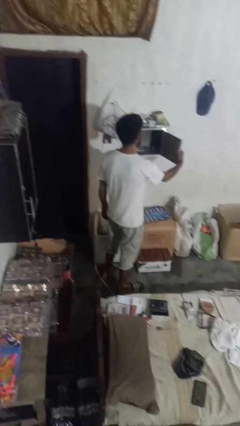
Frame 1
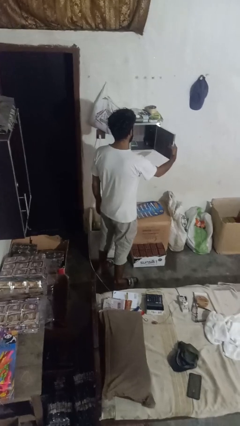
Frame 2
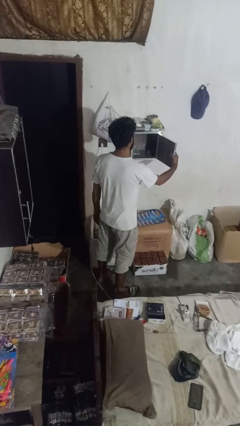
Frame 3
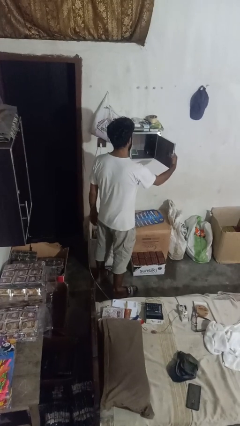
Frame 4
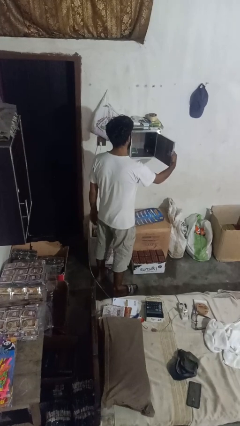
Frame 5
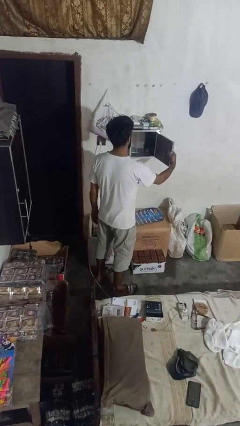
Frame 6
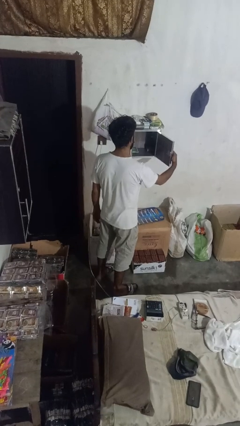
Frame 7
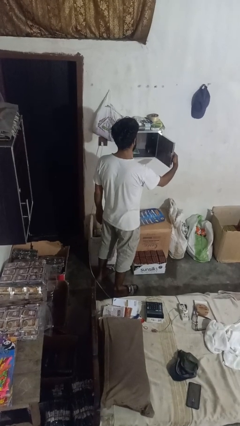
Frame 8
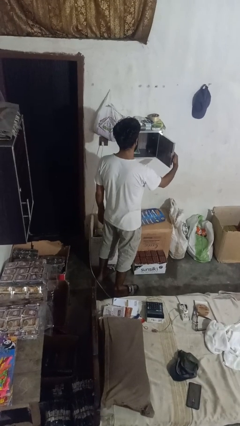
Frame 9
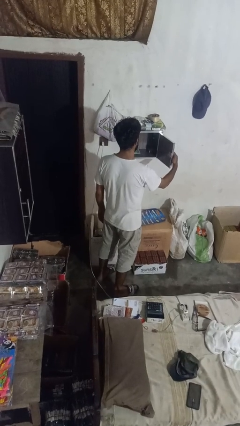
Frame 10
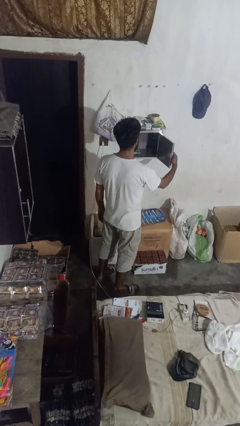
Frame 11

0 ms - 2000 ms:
person picks up object from cabinet

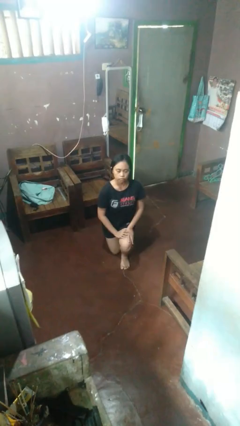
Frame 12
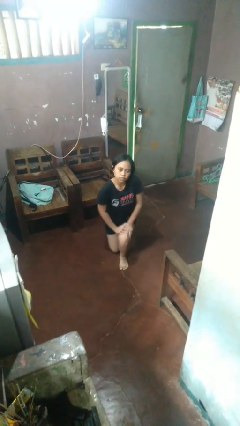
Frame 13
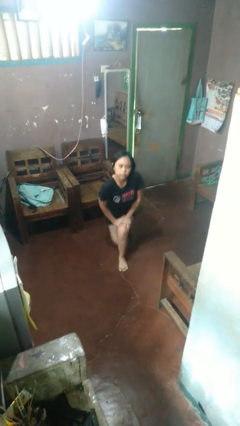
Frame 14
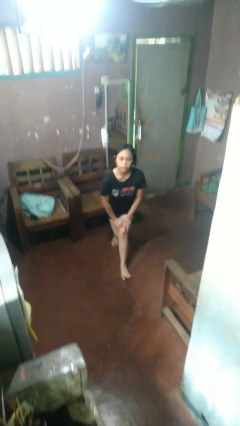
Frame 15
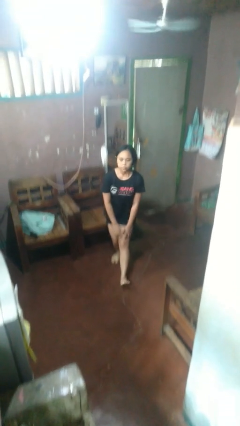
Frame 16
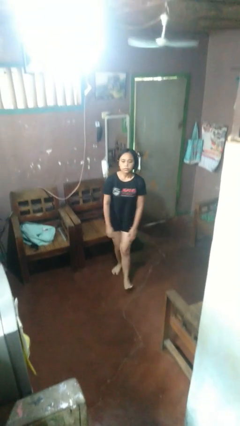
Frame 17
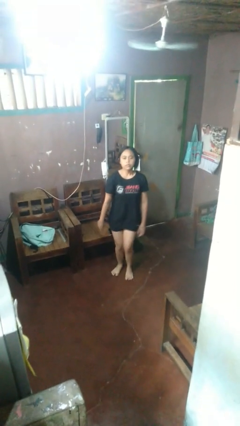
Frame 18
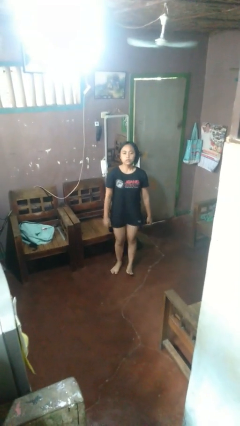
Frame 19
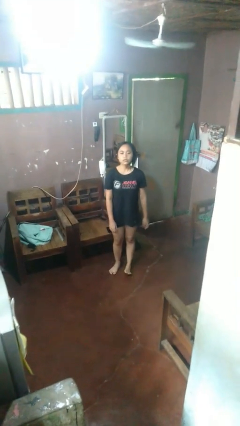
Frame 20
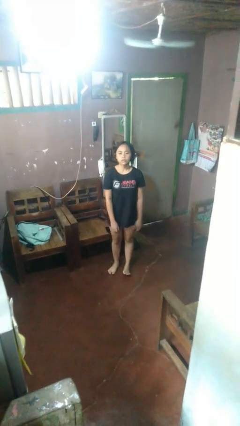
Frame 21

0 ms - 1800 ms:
person stands up from floor

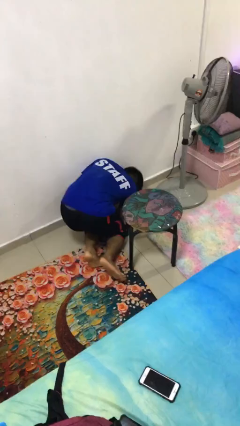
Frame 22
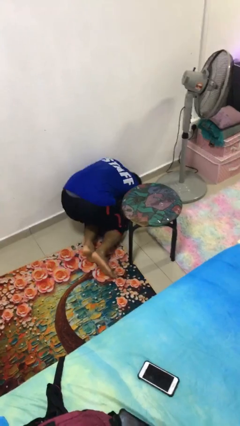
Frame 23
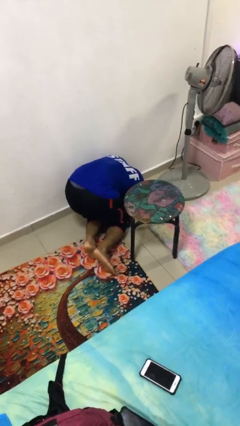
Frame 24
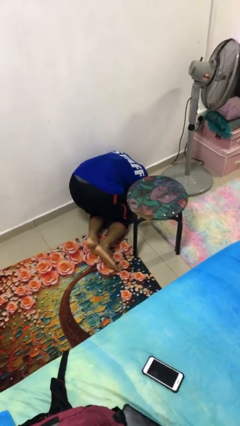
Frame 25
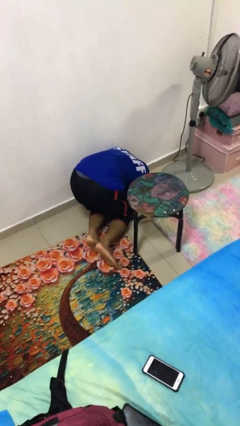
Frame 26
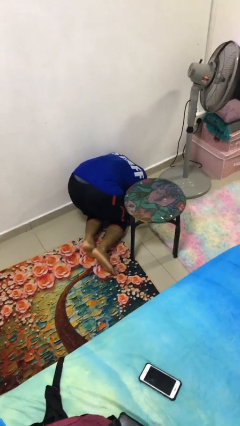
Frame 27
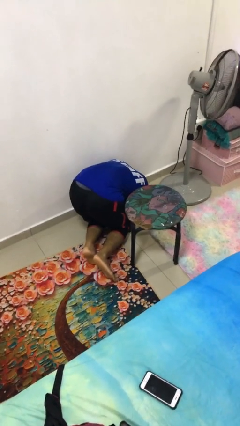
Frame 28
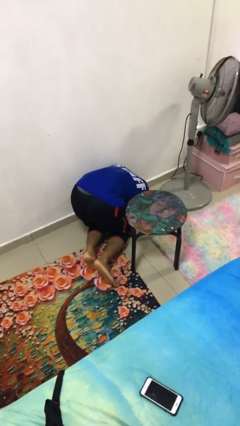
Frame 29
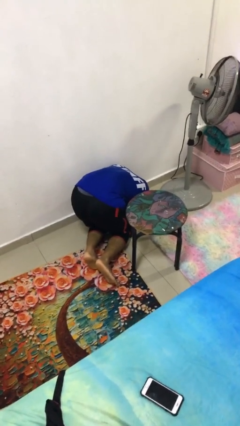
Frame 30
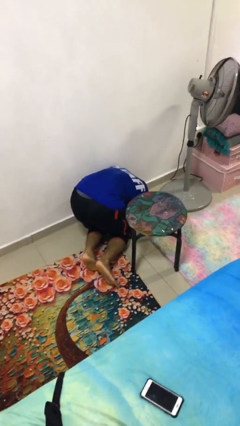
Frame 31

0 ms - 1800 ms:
person lies down on floor

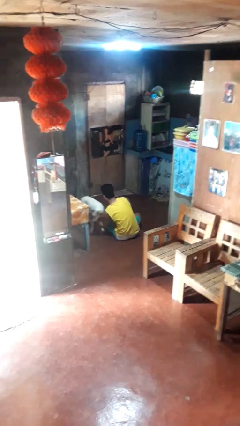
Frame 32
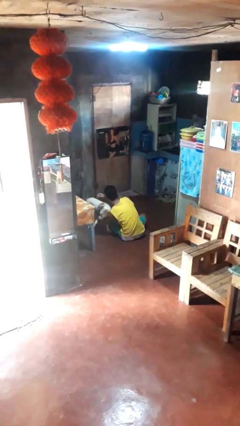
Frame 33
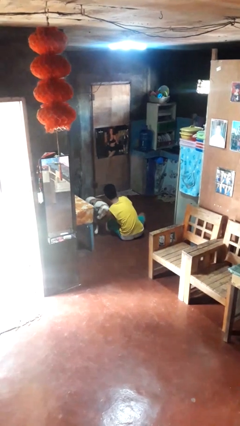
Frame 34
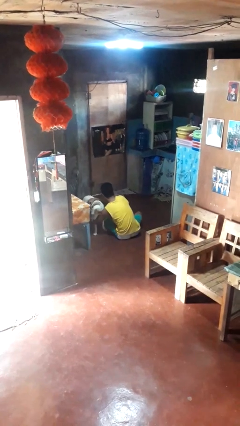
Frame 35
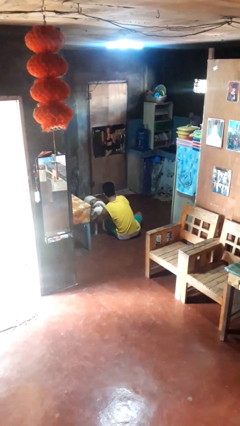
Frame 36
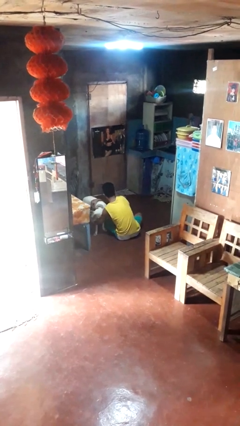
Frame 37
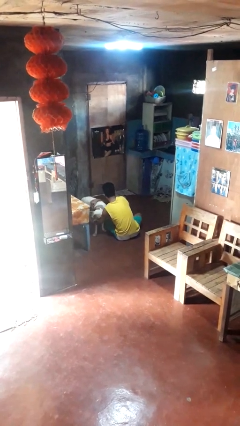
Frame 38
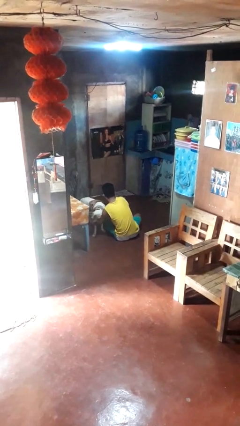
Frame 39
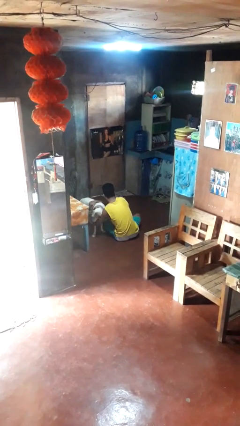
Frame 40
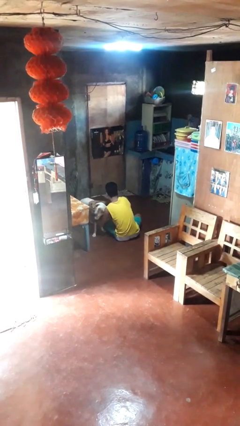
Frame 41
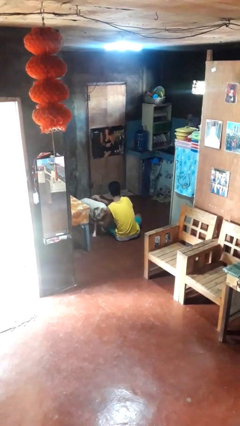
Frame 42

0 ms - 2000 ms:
person hugs dog

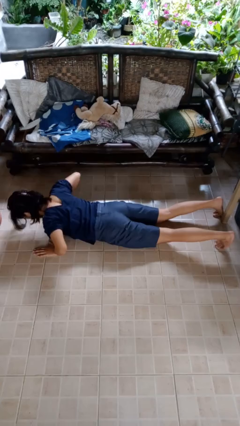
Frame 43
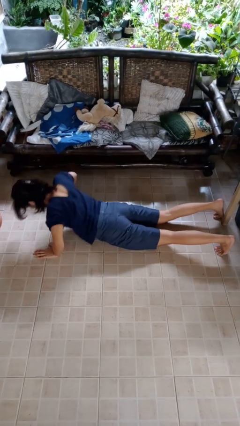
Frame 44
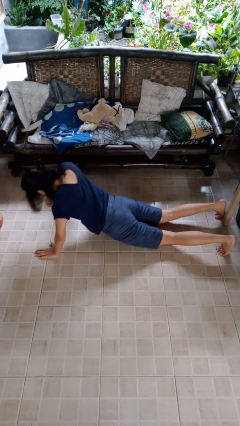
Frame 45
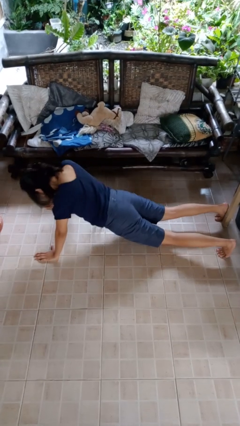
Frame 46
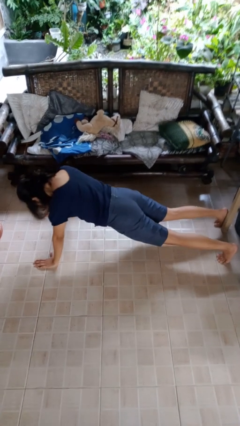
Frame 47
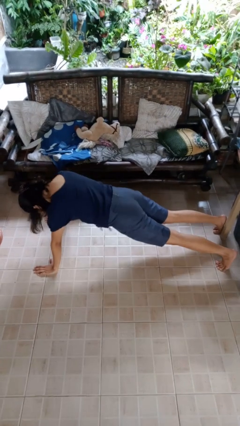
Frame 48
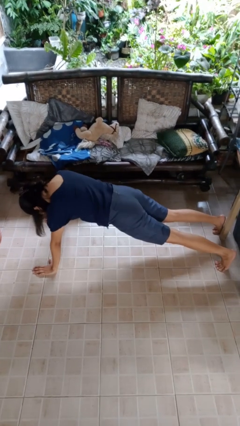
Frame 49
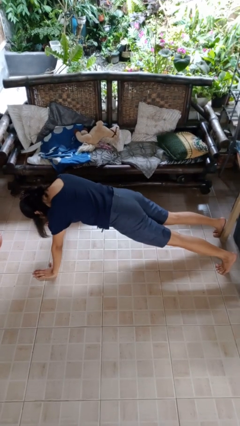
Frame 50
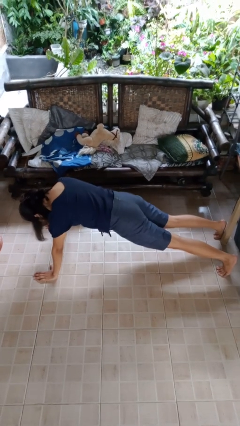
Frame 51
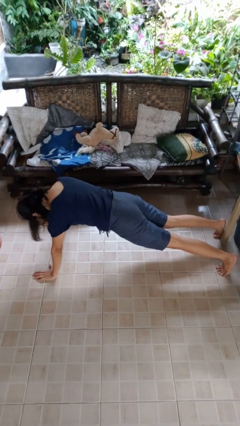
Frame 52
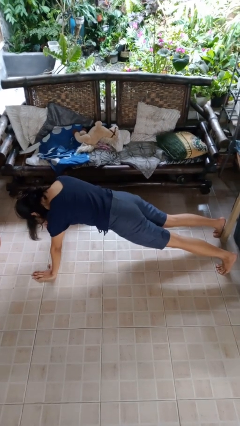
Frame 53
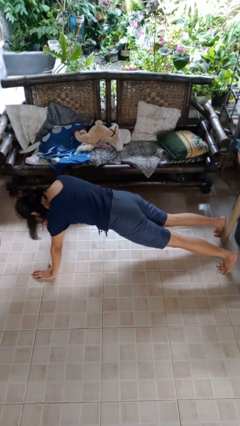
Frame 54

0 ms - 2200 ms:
person exercises with pushup

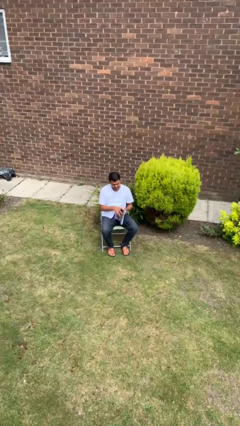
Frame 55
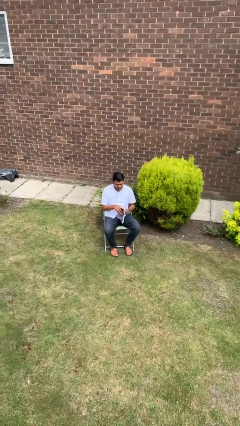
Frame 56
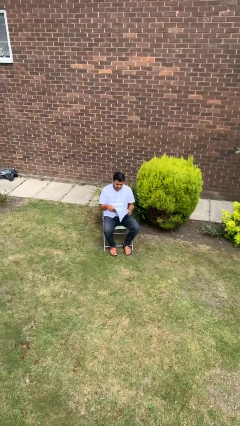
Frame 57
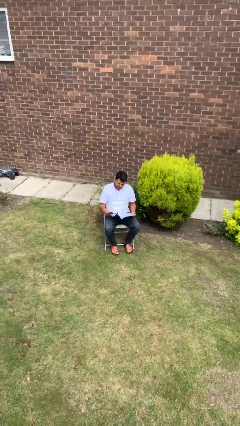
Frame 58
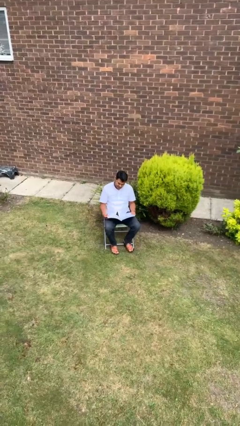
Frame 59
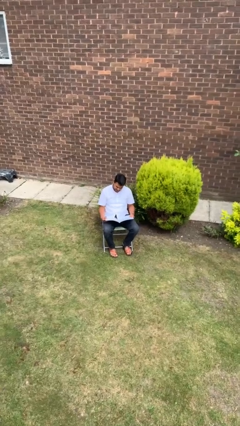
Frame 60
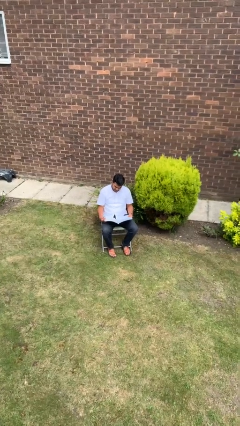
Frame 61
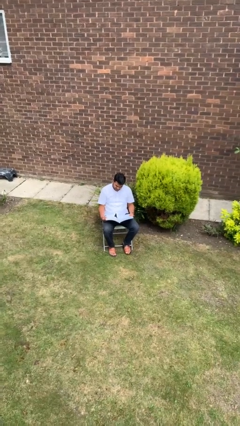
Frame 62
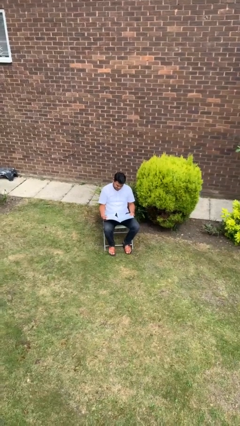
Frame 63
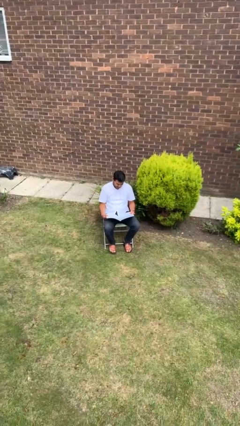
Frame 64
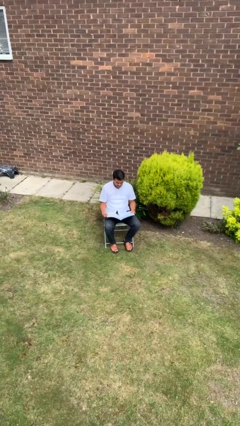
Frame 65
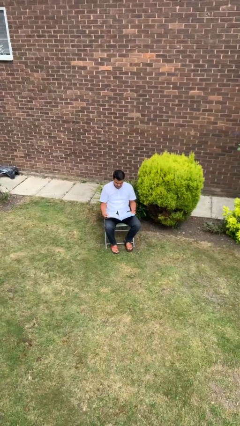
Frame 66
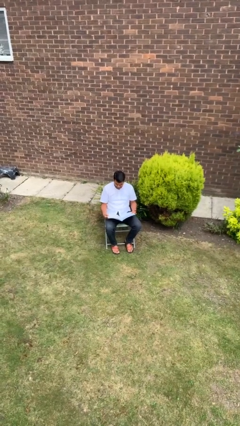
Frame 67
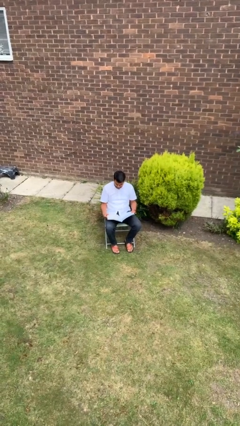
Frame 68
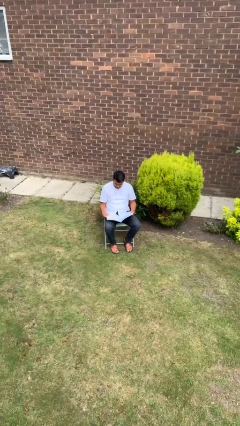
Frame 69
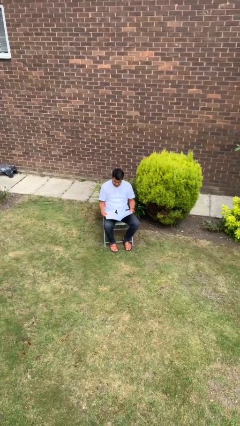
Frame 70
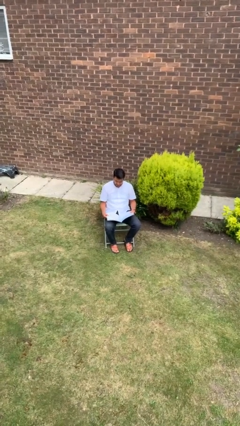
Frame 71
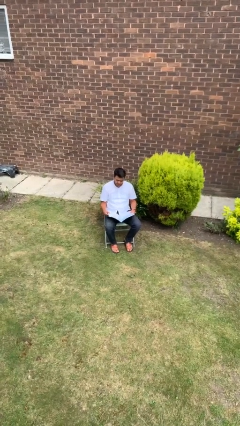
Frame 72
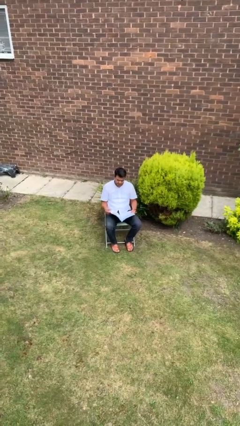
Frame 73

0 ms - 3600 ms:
person reads magazine

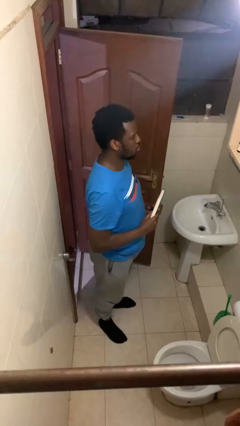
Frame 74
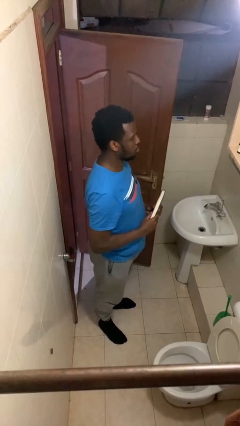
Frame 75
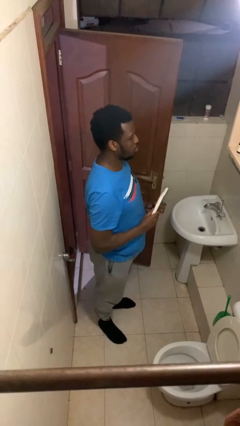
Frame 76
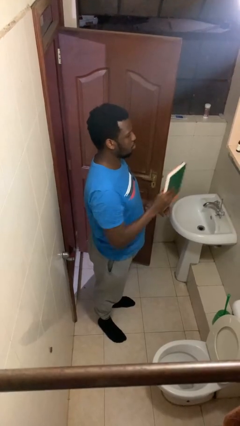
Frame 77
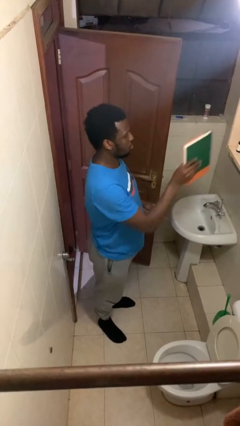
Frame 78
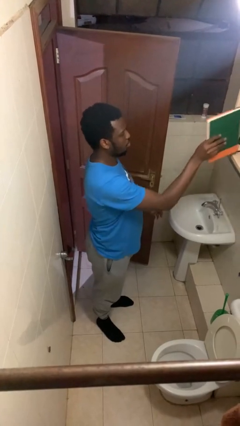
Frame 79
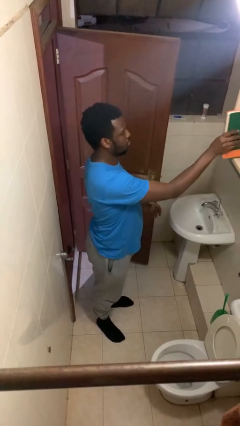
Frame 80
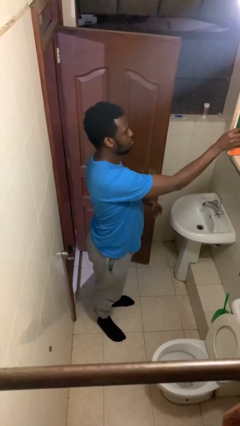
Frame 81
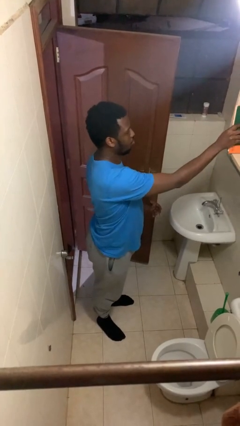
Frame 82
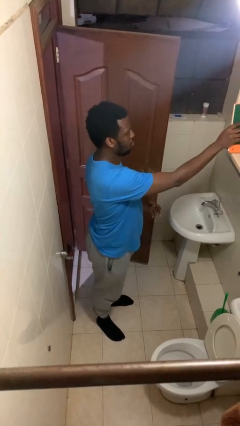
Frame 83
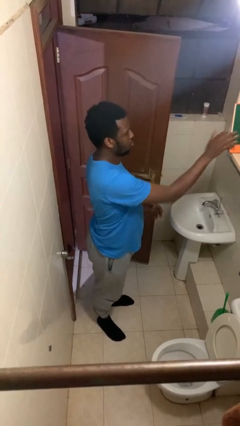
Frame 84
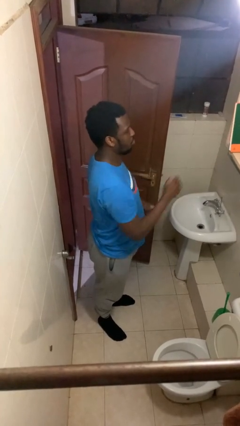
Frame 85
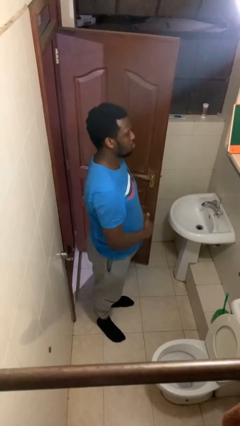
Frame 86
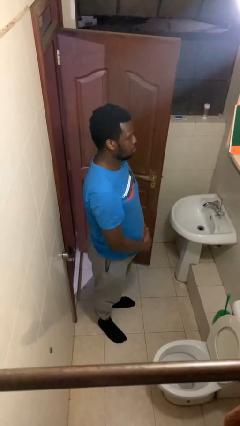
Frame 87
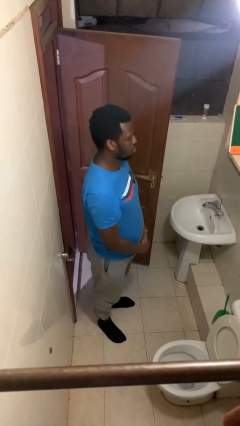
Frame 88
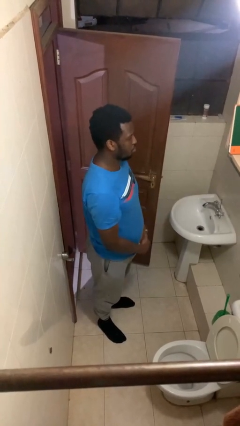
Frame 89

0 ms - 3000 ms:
person puts down object into cabinet

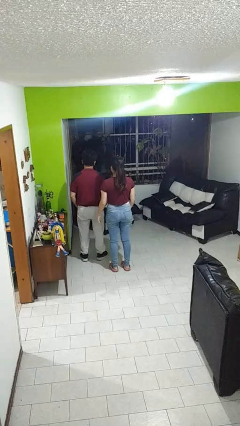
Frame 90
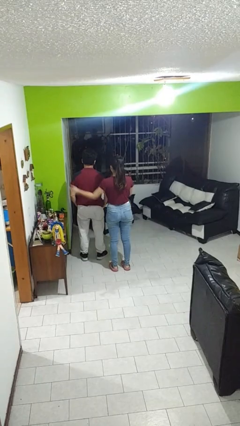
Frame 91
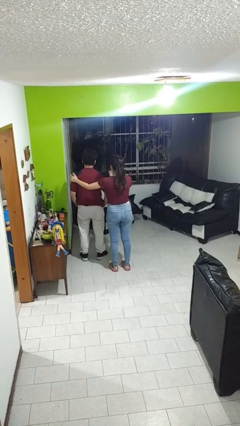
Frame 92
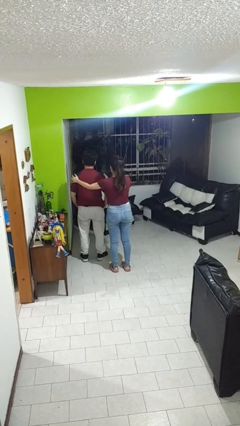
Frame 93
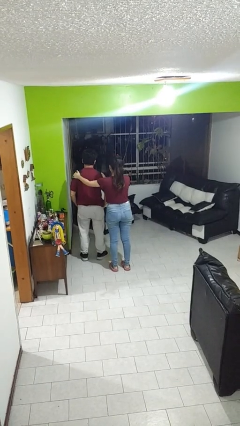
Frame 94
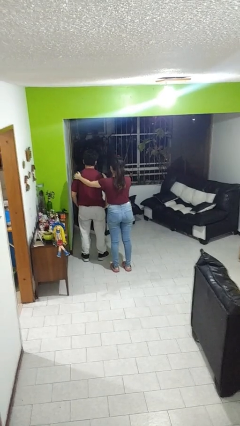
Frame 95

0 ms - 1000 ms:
person pounds shoulders of person
